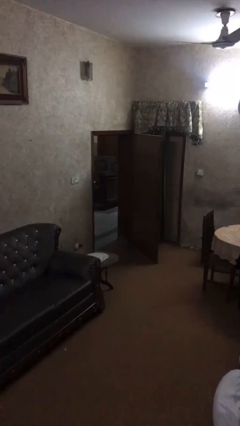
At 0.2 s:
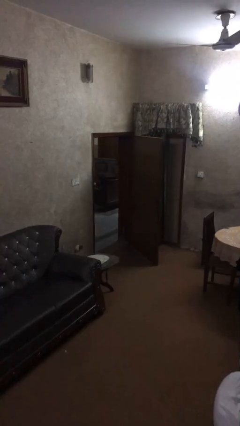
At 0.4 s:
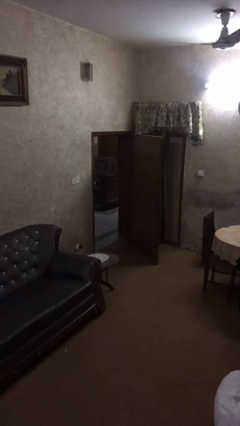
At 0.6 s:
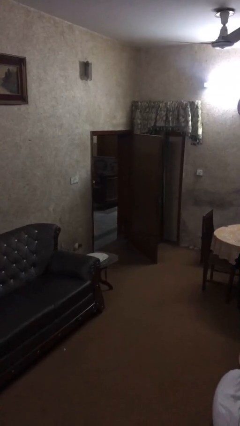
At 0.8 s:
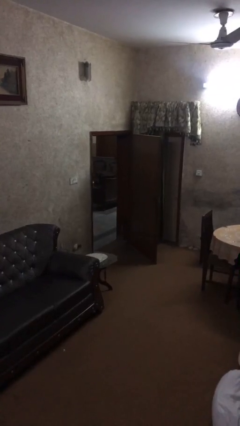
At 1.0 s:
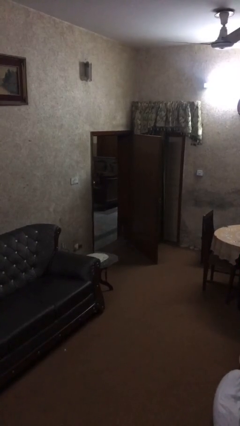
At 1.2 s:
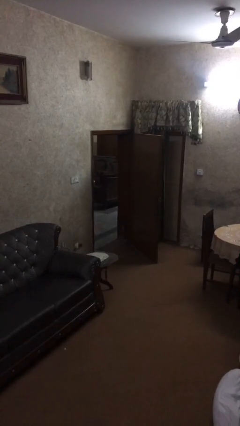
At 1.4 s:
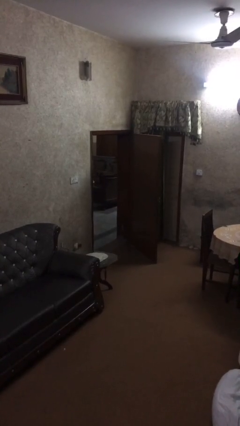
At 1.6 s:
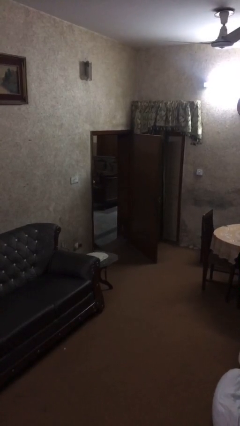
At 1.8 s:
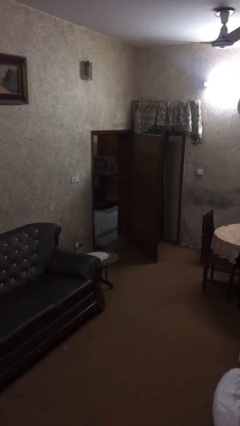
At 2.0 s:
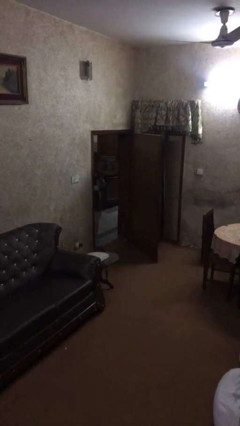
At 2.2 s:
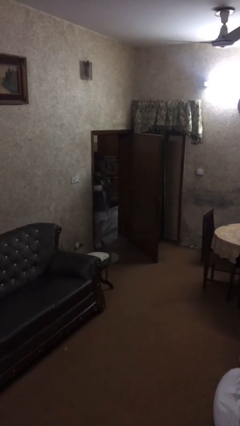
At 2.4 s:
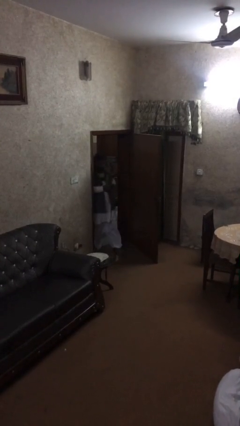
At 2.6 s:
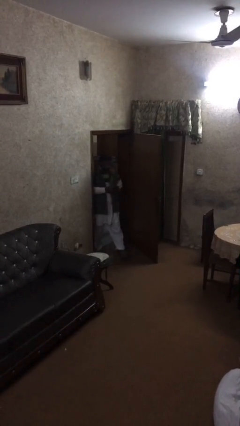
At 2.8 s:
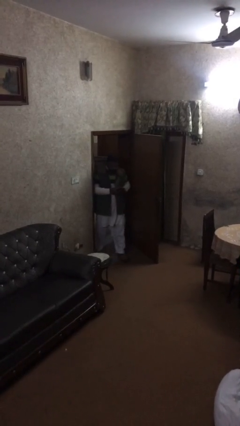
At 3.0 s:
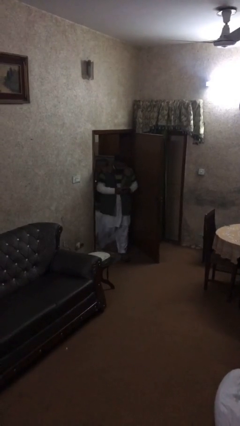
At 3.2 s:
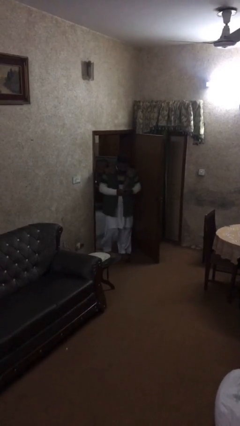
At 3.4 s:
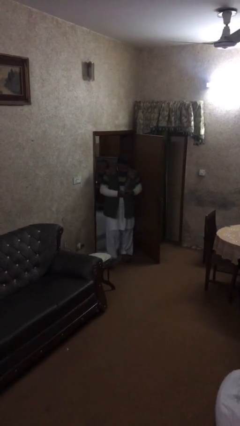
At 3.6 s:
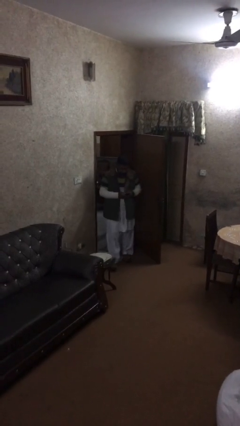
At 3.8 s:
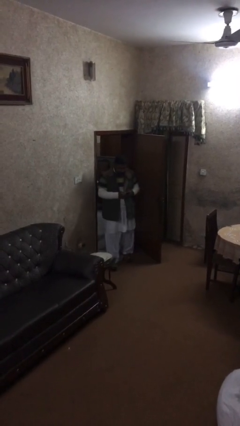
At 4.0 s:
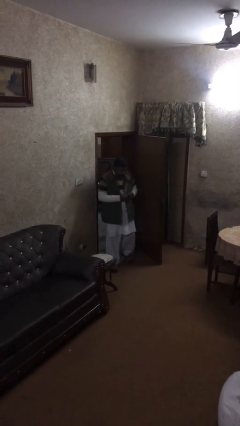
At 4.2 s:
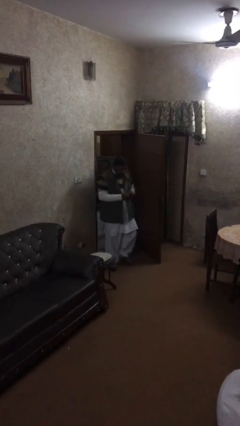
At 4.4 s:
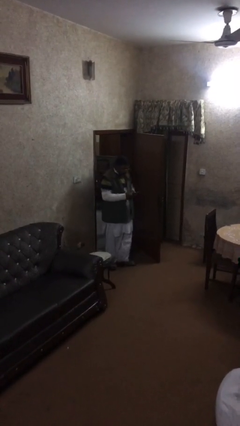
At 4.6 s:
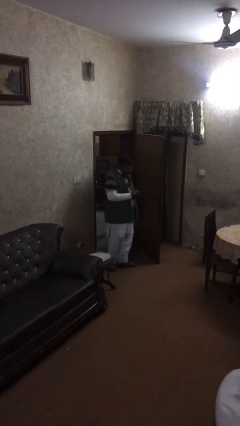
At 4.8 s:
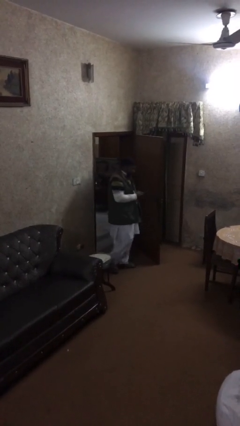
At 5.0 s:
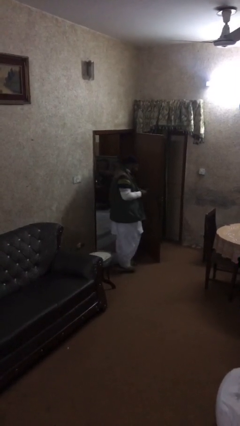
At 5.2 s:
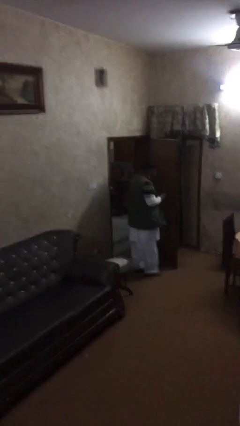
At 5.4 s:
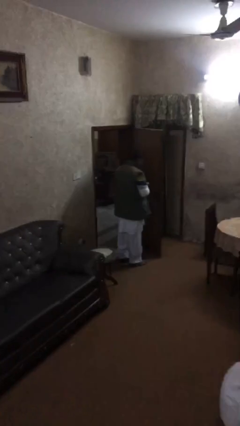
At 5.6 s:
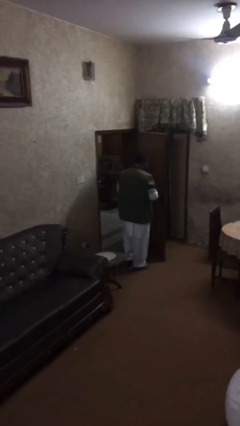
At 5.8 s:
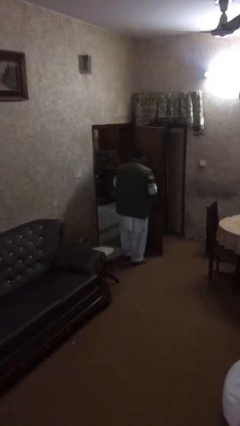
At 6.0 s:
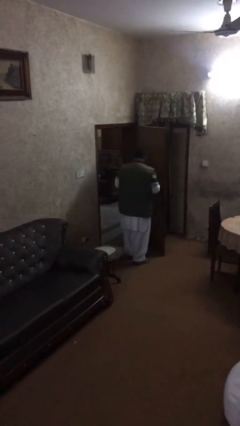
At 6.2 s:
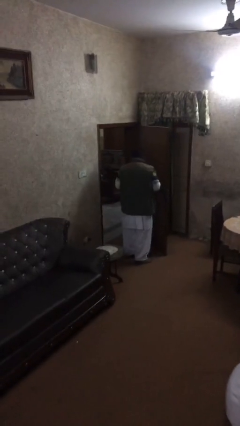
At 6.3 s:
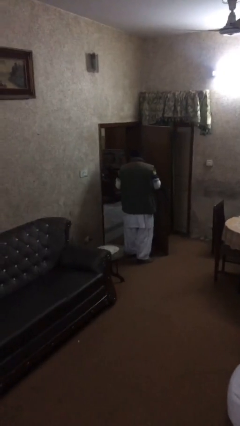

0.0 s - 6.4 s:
person enters scene through structure

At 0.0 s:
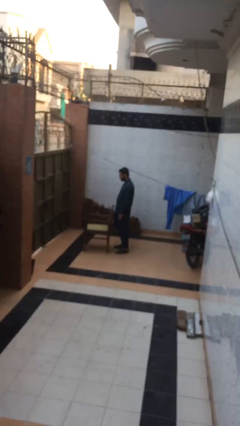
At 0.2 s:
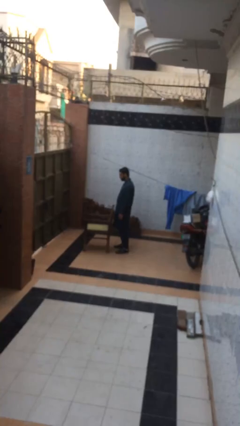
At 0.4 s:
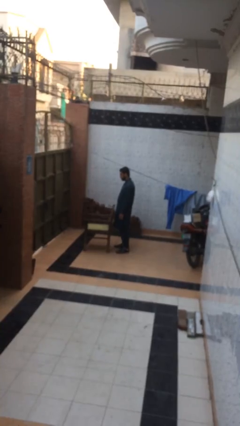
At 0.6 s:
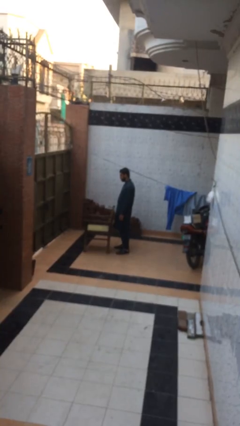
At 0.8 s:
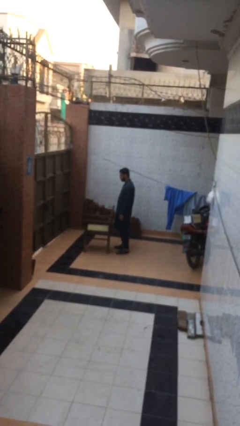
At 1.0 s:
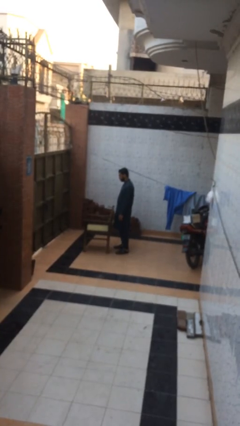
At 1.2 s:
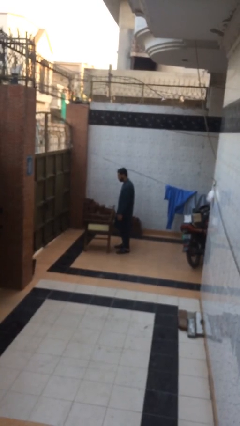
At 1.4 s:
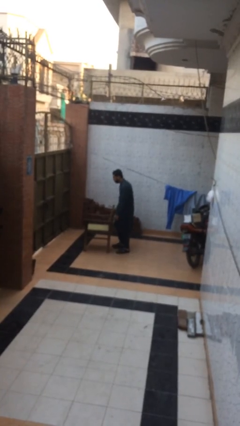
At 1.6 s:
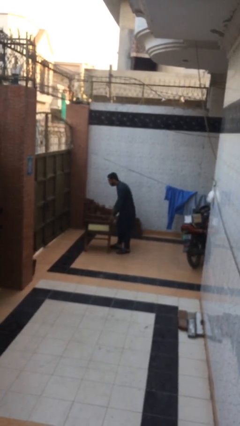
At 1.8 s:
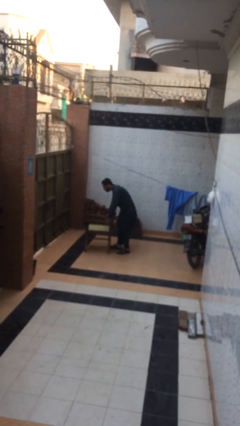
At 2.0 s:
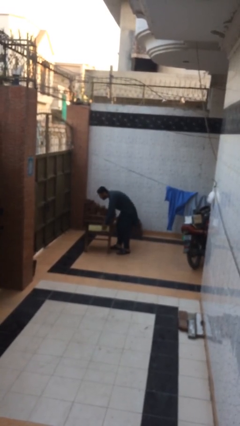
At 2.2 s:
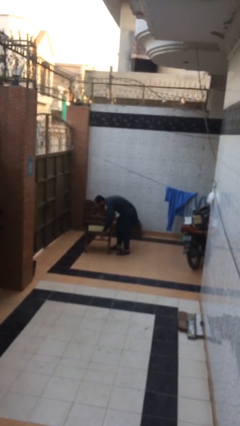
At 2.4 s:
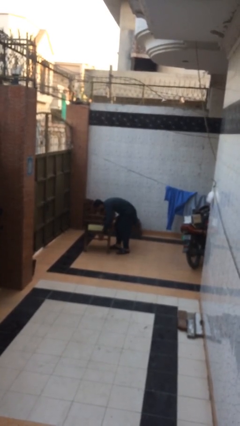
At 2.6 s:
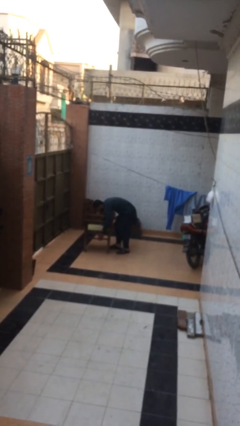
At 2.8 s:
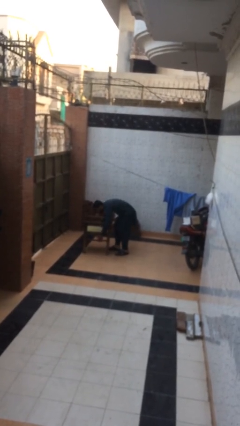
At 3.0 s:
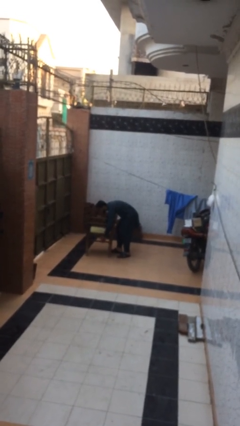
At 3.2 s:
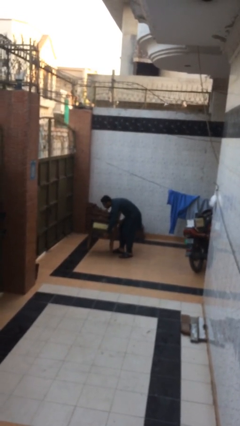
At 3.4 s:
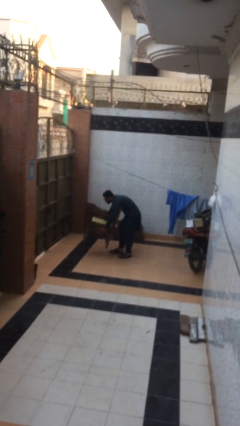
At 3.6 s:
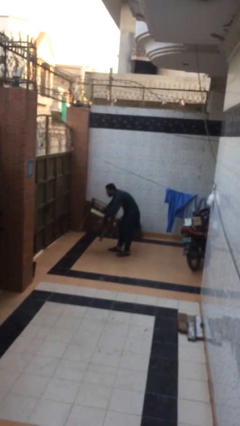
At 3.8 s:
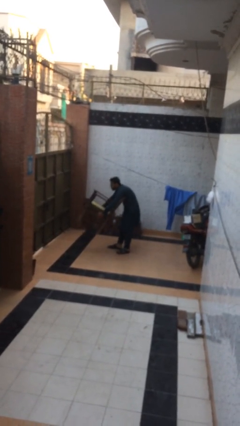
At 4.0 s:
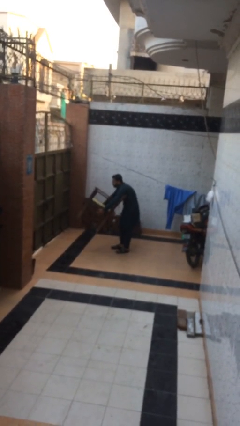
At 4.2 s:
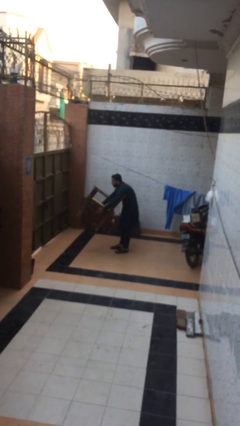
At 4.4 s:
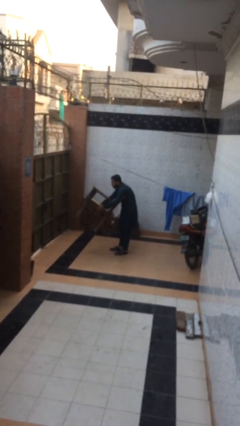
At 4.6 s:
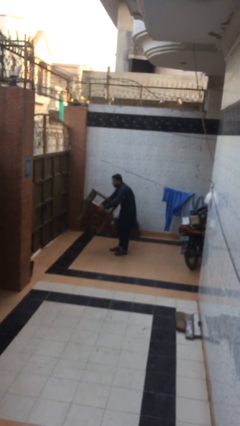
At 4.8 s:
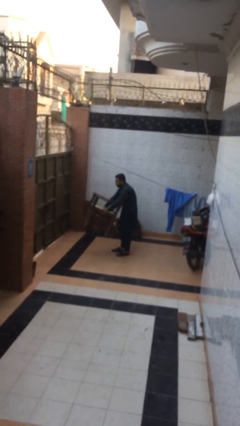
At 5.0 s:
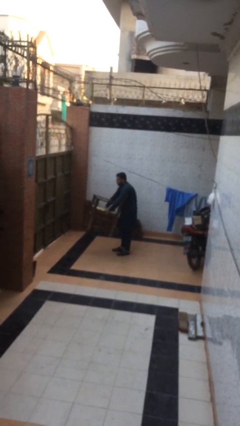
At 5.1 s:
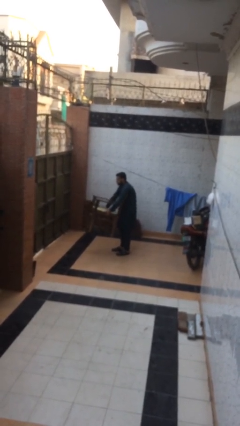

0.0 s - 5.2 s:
person picks up object from floor

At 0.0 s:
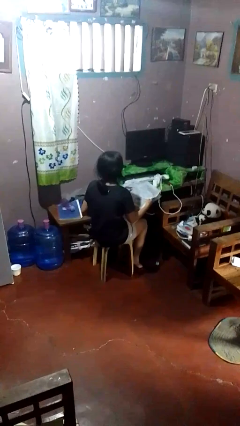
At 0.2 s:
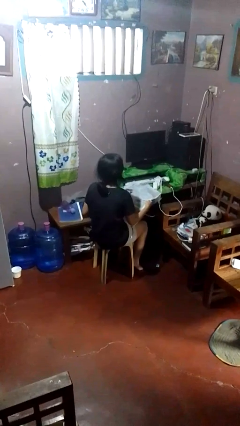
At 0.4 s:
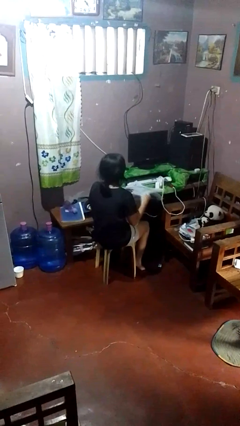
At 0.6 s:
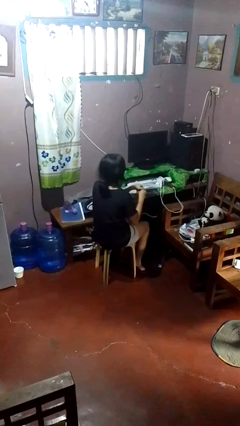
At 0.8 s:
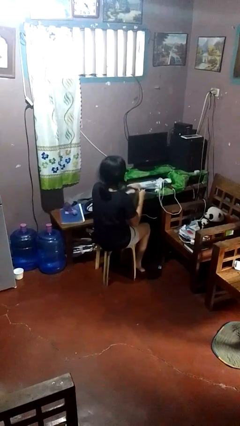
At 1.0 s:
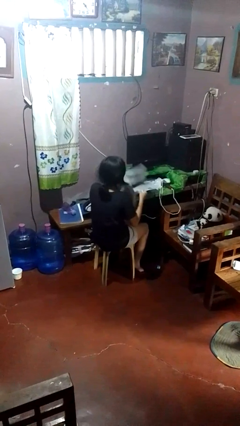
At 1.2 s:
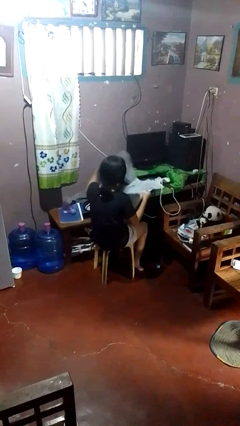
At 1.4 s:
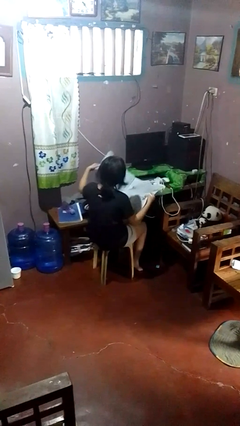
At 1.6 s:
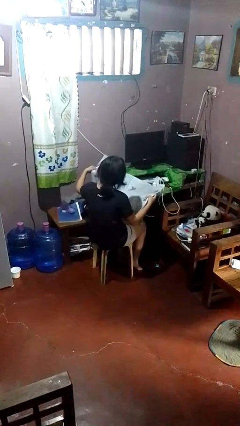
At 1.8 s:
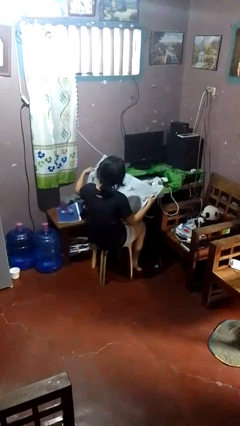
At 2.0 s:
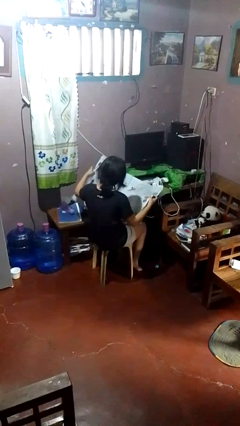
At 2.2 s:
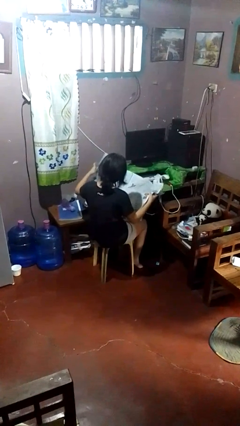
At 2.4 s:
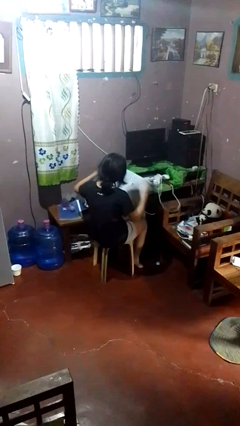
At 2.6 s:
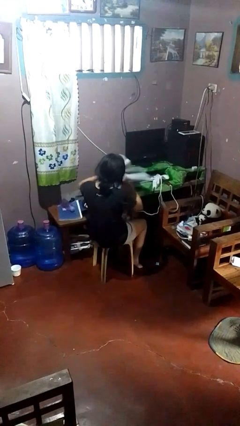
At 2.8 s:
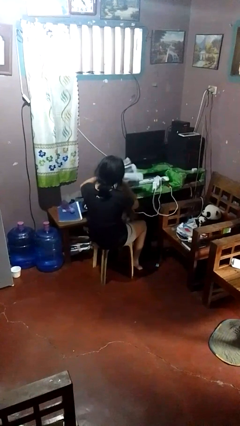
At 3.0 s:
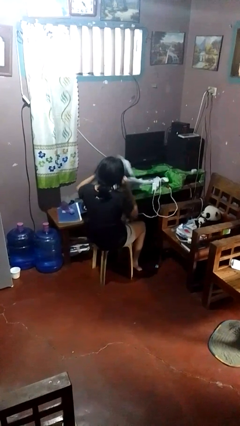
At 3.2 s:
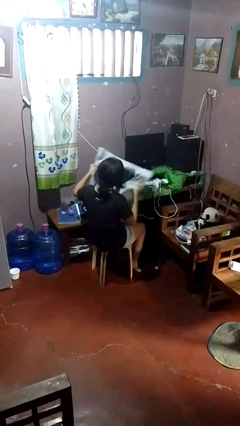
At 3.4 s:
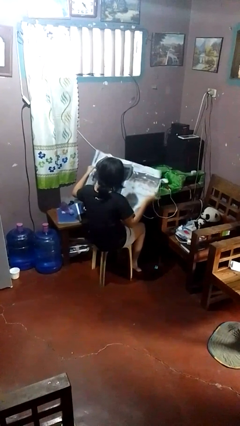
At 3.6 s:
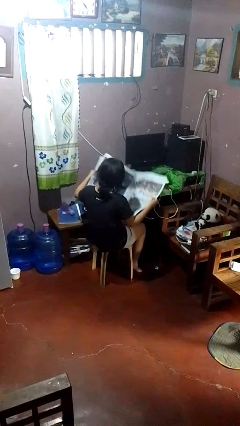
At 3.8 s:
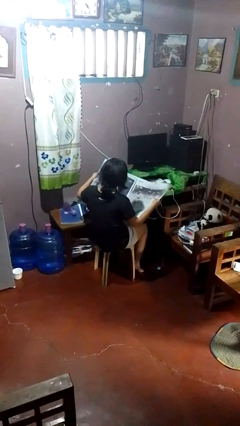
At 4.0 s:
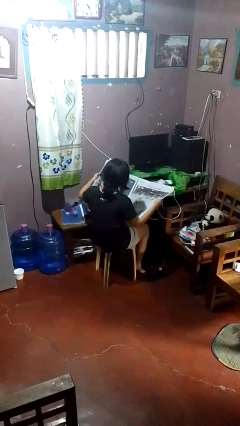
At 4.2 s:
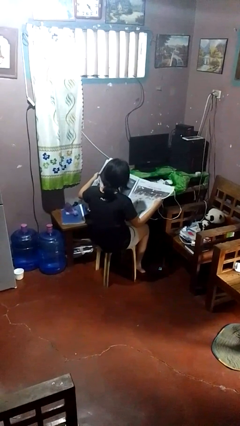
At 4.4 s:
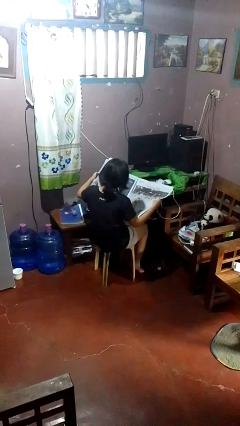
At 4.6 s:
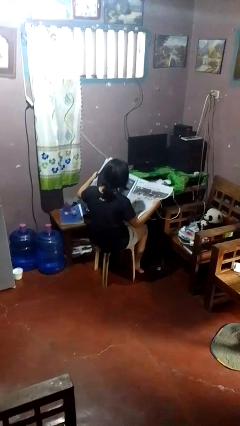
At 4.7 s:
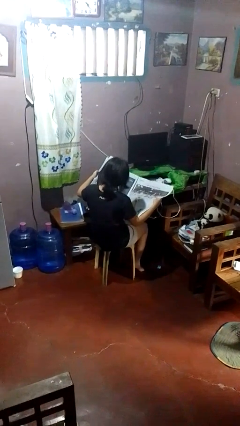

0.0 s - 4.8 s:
person reads newspaper

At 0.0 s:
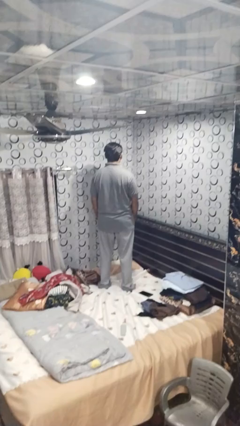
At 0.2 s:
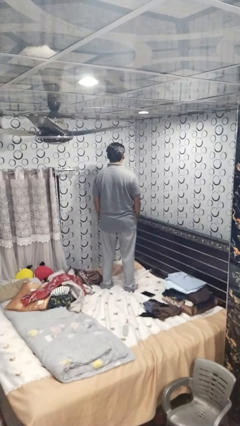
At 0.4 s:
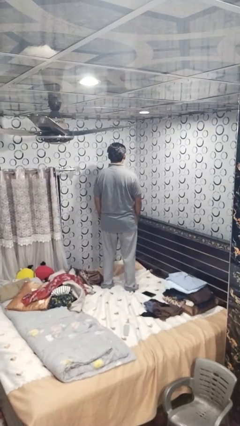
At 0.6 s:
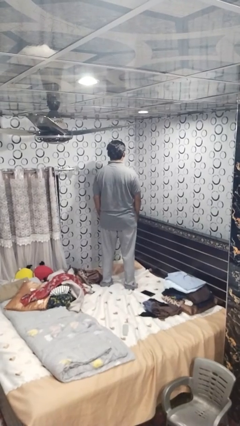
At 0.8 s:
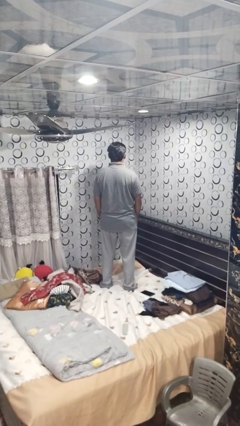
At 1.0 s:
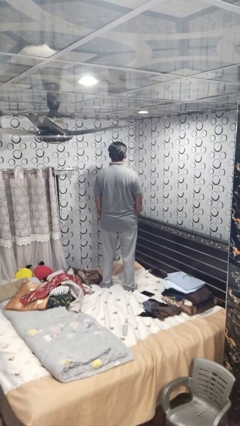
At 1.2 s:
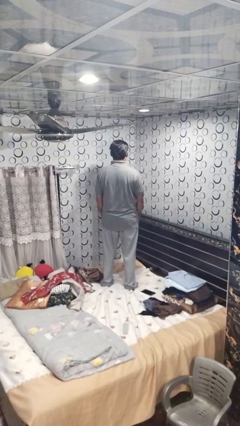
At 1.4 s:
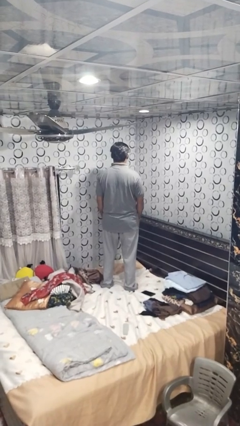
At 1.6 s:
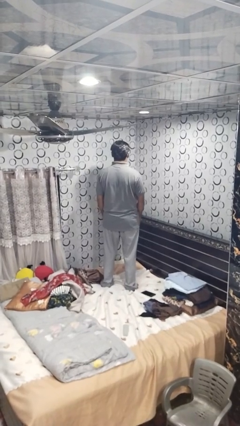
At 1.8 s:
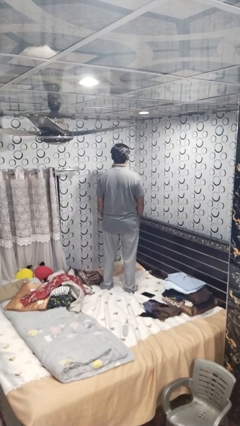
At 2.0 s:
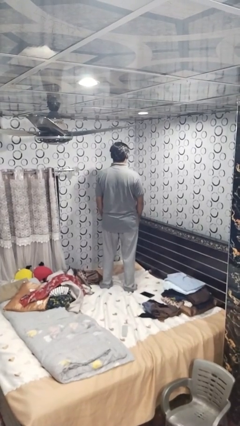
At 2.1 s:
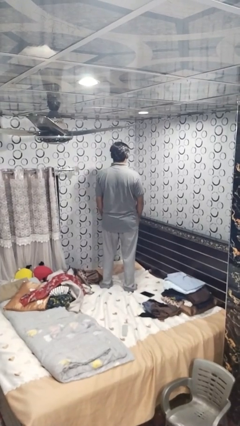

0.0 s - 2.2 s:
person jumps on bed
